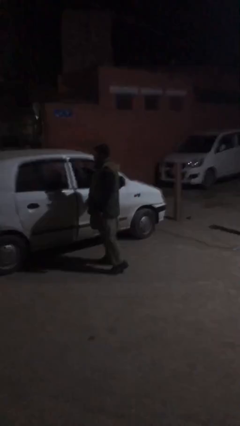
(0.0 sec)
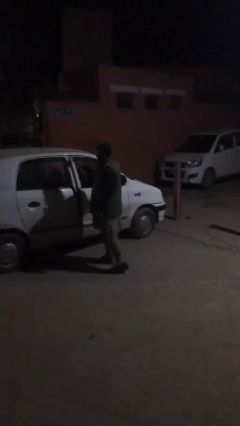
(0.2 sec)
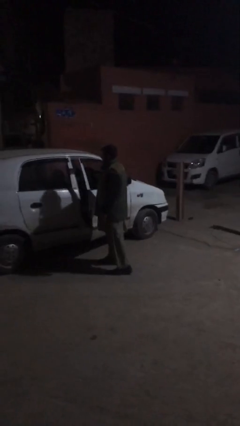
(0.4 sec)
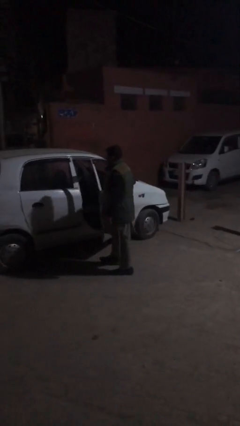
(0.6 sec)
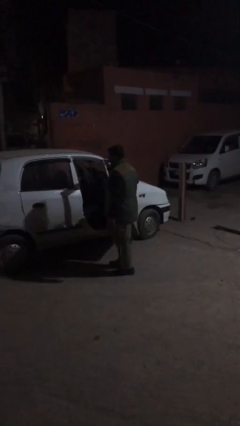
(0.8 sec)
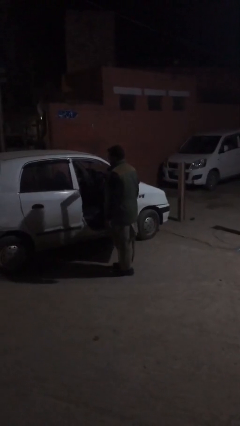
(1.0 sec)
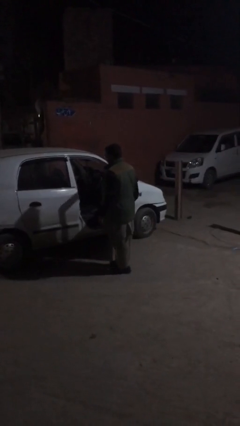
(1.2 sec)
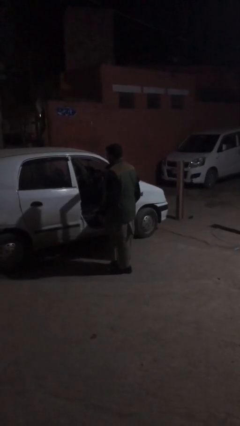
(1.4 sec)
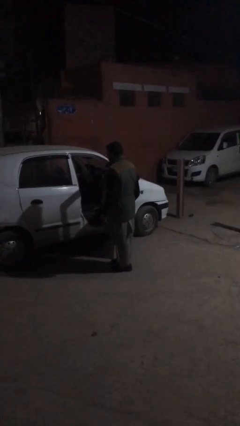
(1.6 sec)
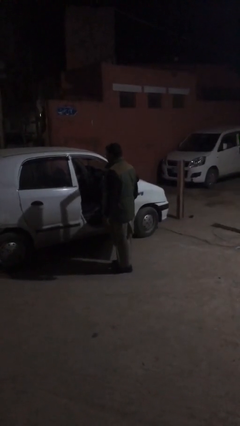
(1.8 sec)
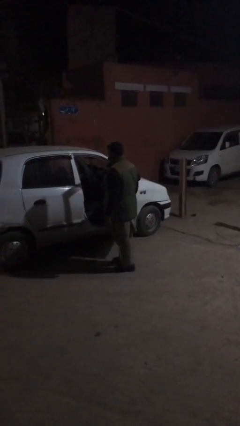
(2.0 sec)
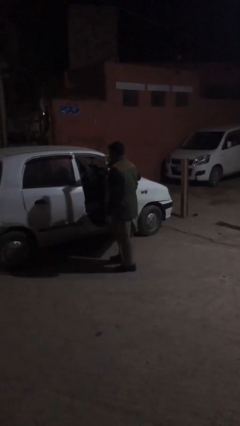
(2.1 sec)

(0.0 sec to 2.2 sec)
person opens car door

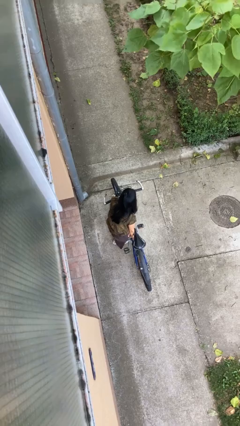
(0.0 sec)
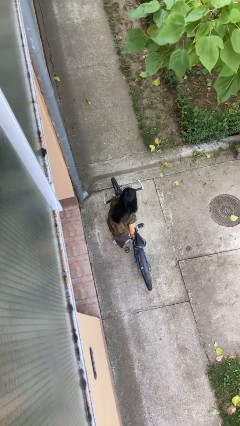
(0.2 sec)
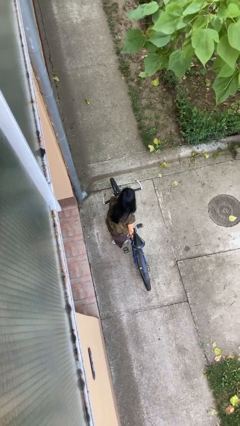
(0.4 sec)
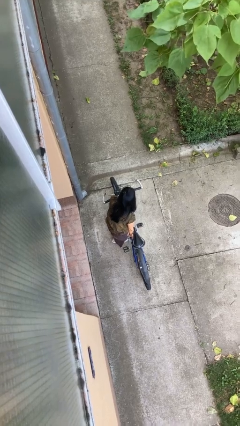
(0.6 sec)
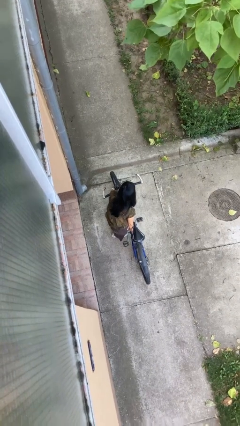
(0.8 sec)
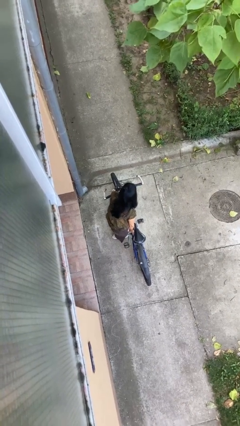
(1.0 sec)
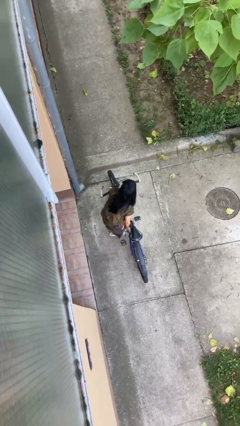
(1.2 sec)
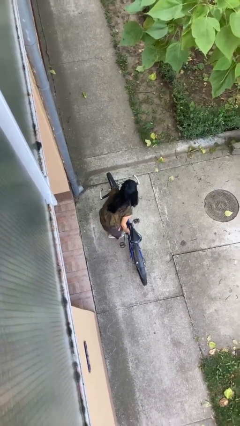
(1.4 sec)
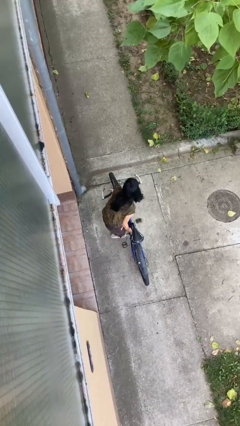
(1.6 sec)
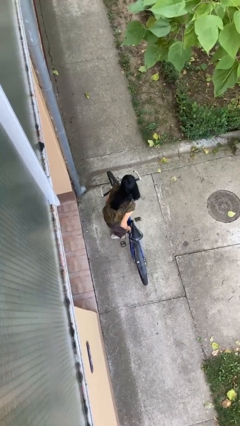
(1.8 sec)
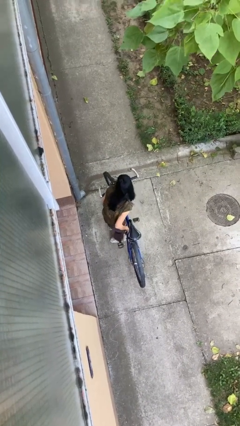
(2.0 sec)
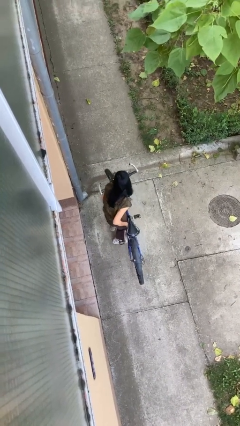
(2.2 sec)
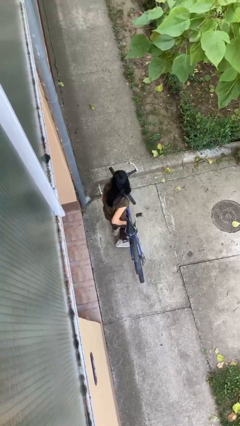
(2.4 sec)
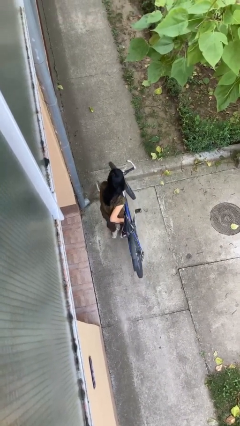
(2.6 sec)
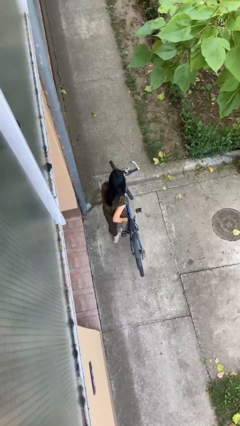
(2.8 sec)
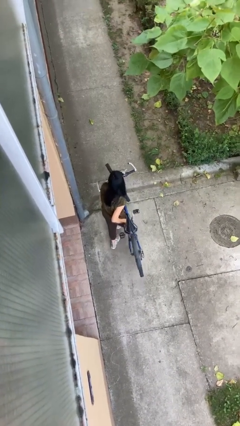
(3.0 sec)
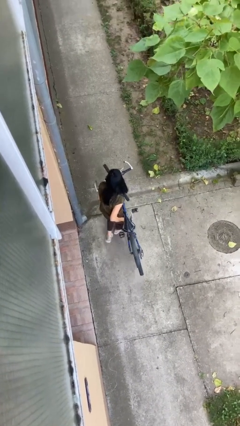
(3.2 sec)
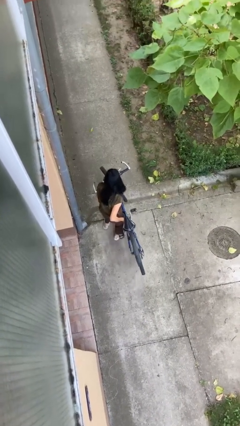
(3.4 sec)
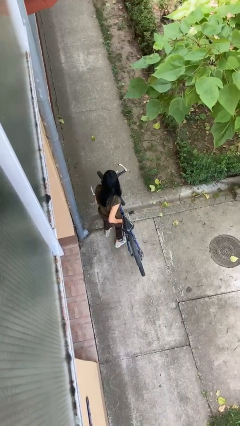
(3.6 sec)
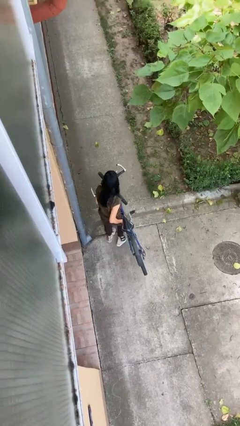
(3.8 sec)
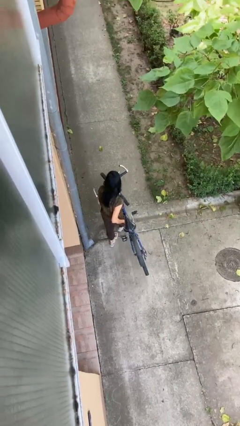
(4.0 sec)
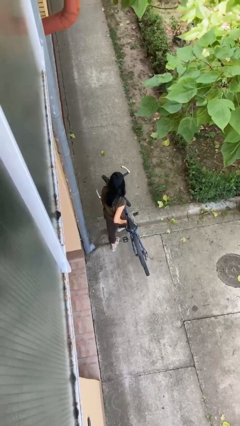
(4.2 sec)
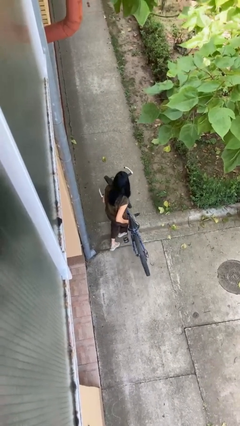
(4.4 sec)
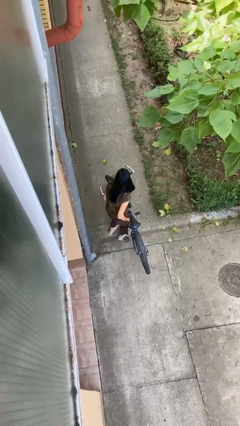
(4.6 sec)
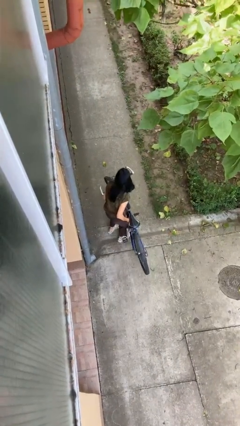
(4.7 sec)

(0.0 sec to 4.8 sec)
person carries bicycle

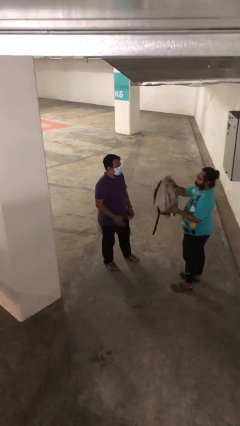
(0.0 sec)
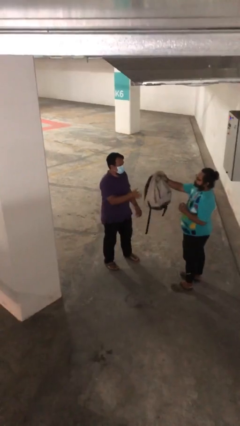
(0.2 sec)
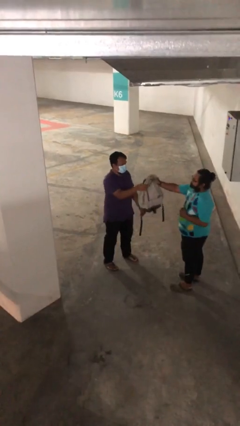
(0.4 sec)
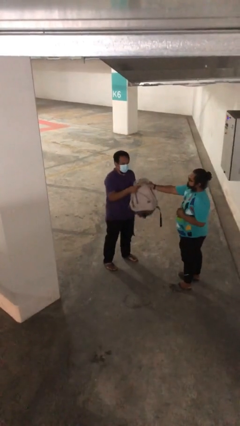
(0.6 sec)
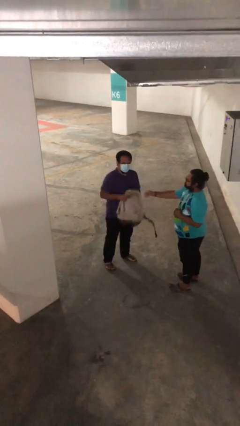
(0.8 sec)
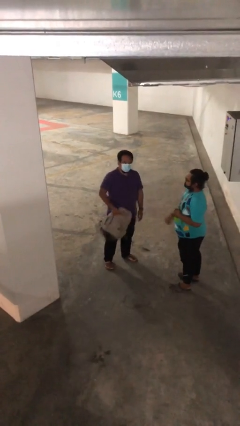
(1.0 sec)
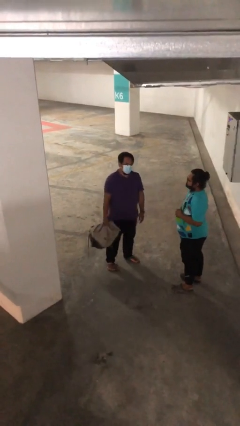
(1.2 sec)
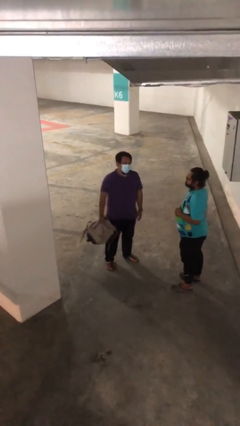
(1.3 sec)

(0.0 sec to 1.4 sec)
person transfers object to person

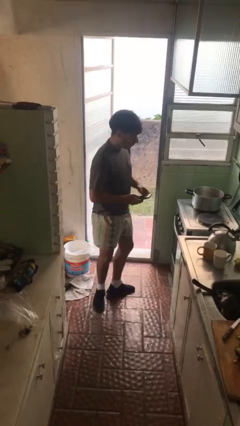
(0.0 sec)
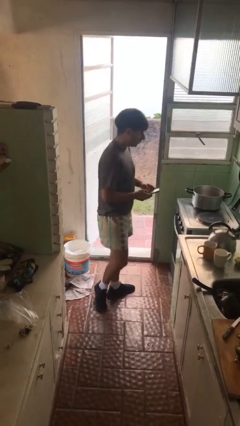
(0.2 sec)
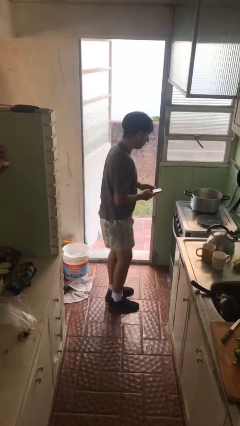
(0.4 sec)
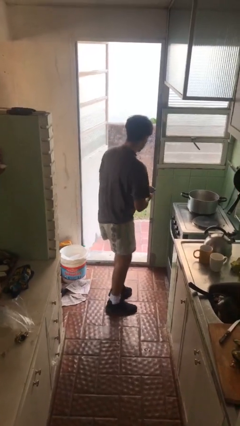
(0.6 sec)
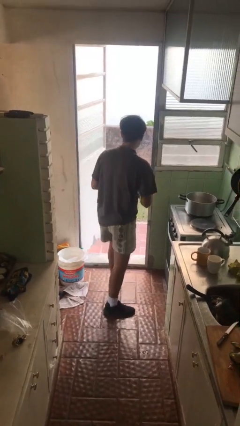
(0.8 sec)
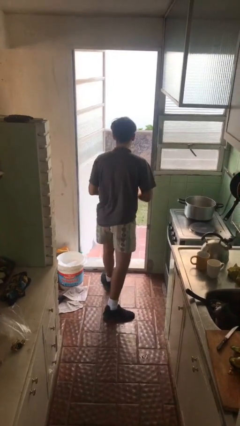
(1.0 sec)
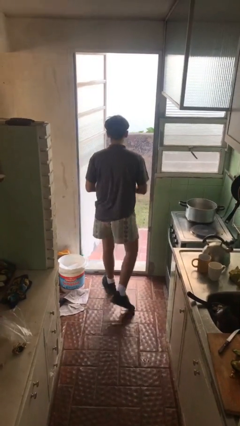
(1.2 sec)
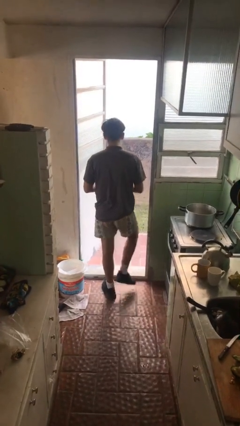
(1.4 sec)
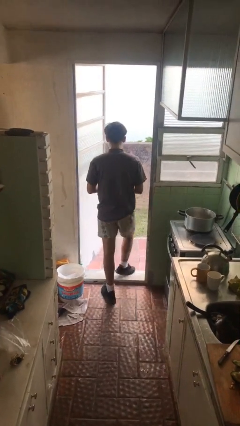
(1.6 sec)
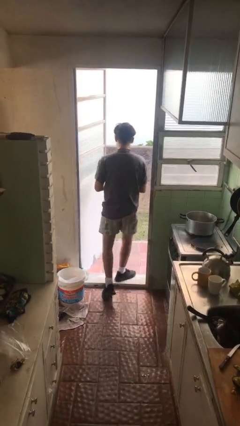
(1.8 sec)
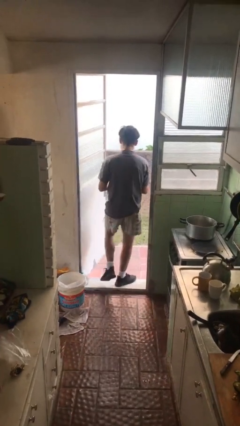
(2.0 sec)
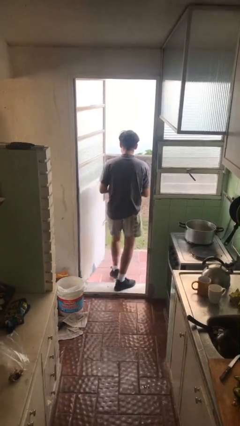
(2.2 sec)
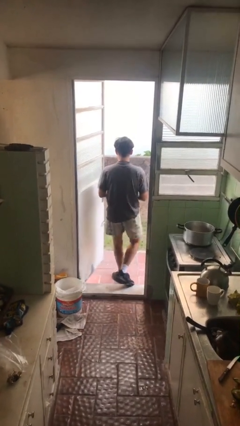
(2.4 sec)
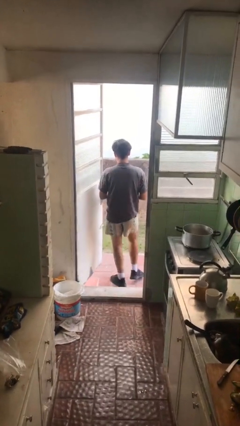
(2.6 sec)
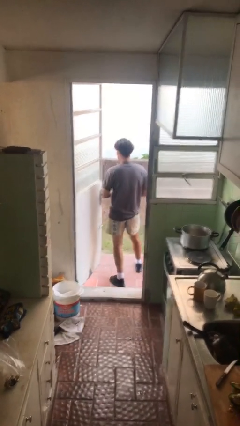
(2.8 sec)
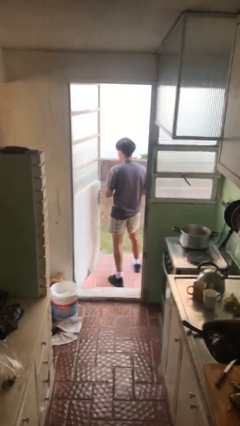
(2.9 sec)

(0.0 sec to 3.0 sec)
person exits scene through structure

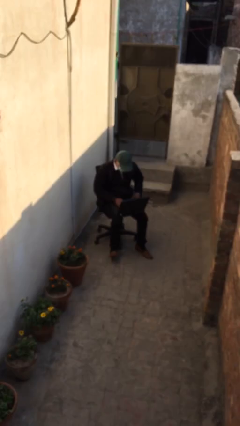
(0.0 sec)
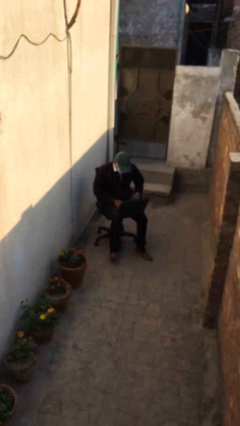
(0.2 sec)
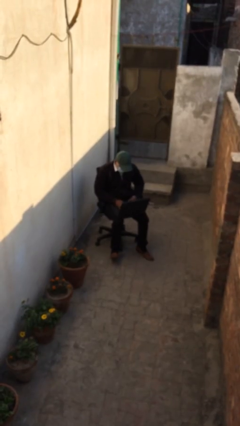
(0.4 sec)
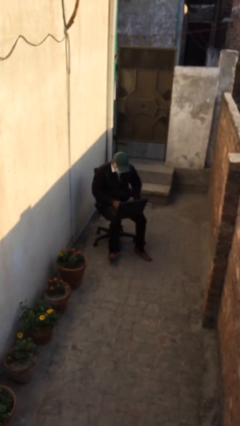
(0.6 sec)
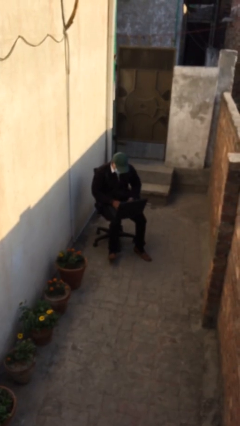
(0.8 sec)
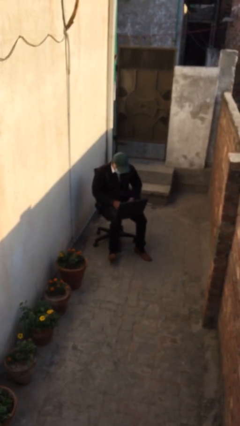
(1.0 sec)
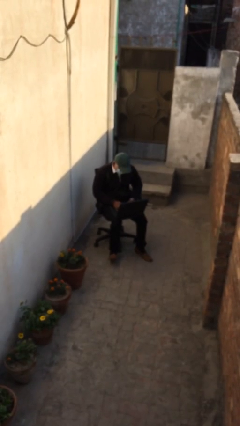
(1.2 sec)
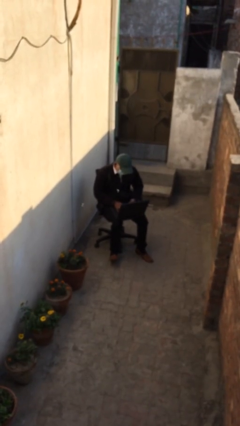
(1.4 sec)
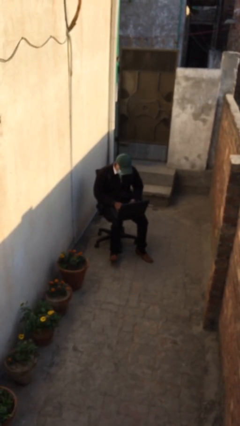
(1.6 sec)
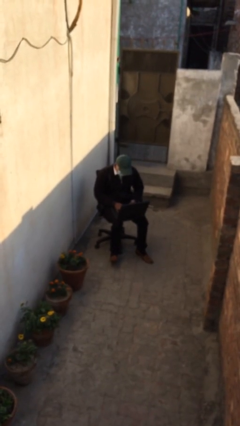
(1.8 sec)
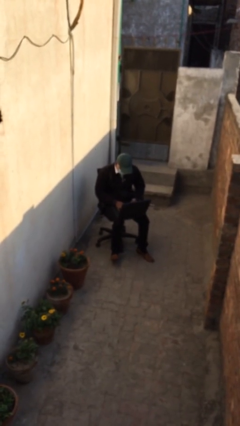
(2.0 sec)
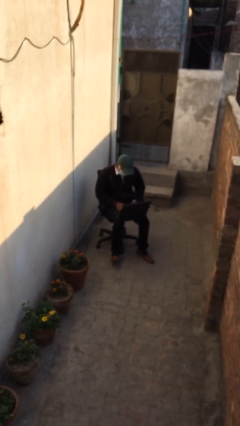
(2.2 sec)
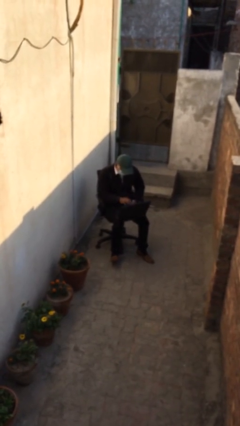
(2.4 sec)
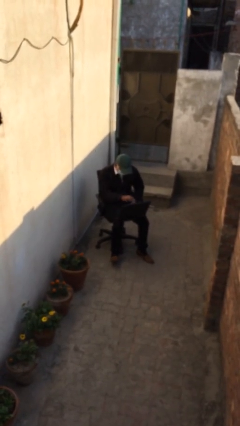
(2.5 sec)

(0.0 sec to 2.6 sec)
person interacts with laptop

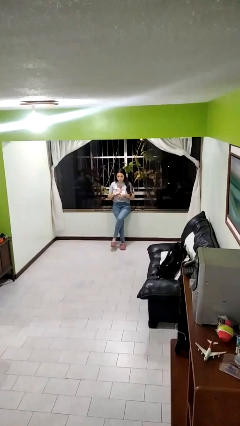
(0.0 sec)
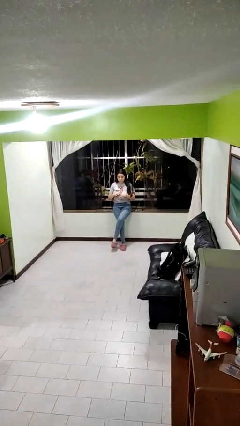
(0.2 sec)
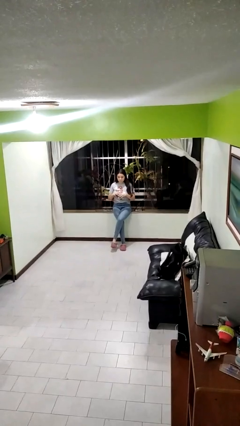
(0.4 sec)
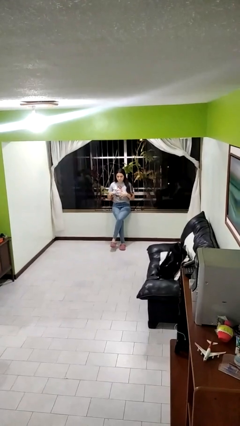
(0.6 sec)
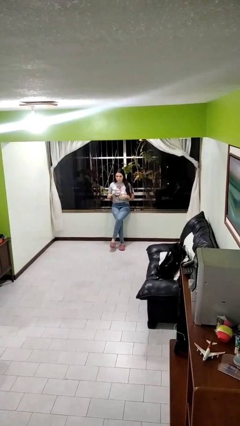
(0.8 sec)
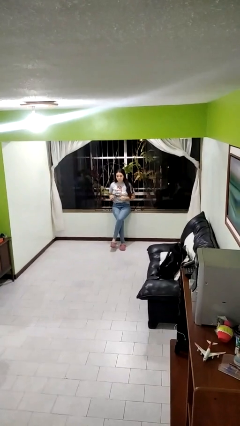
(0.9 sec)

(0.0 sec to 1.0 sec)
person takes off ring

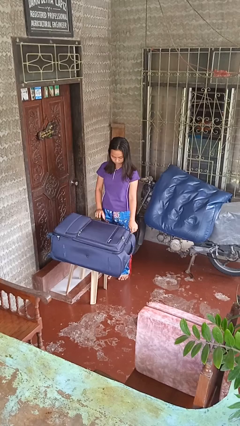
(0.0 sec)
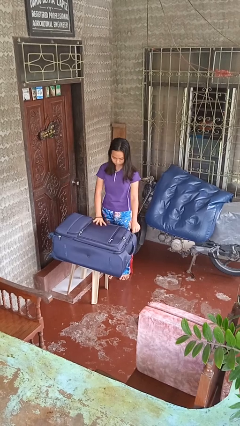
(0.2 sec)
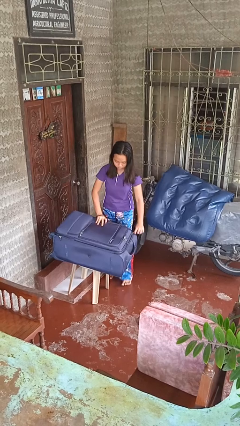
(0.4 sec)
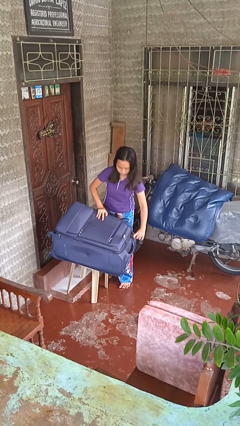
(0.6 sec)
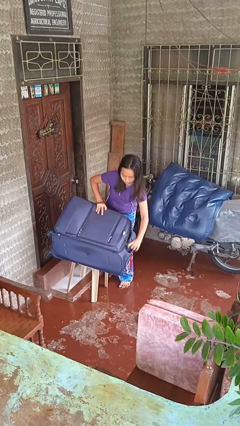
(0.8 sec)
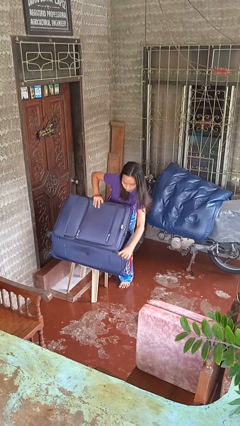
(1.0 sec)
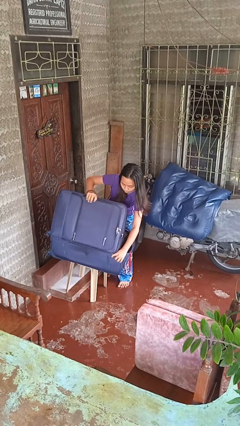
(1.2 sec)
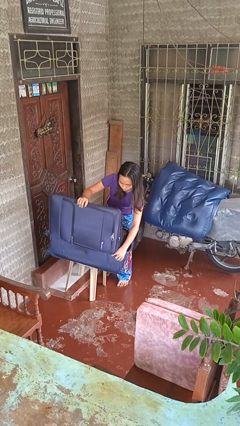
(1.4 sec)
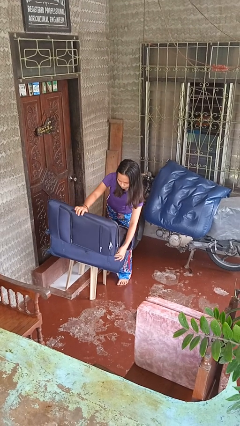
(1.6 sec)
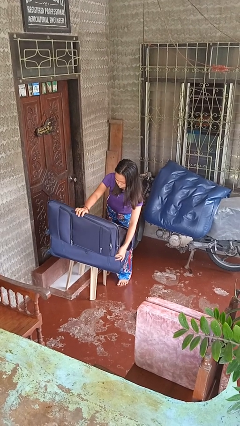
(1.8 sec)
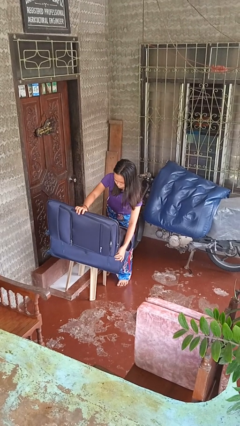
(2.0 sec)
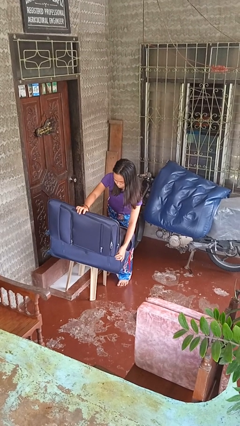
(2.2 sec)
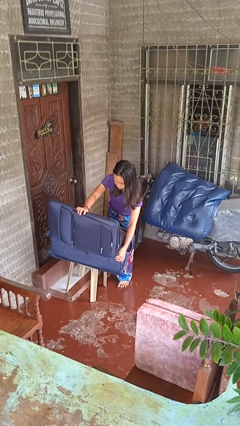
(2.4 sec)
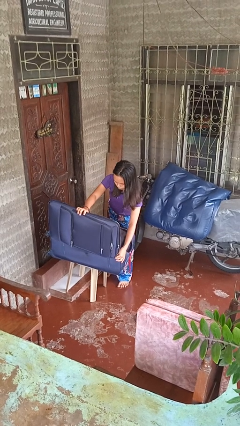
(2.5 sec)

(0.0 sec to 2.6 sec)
person opens suitcase
